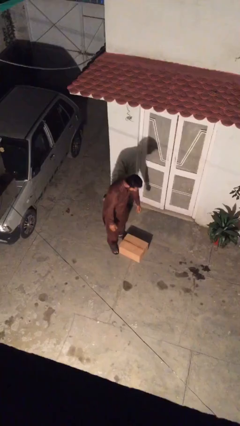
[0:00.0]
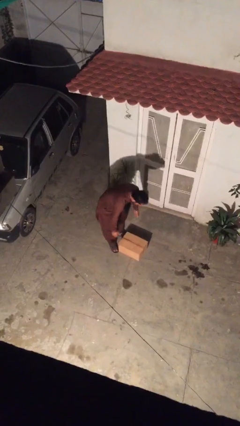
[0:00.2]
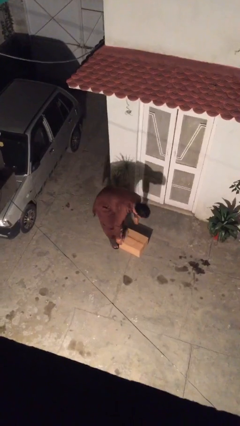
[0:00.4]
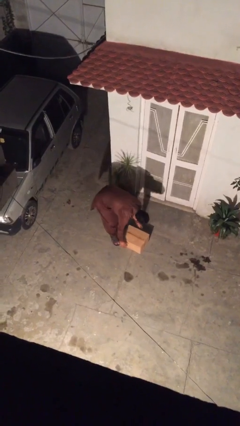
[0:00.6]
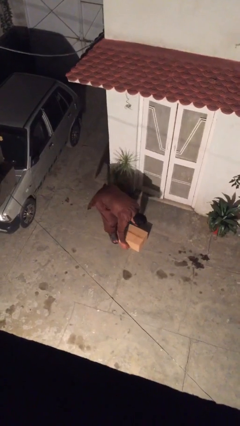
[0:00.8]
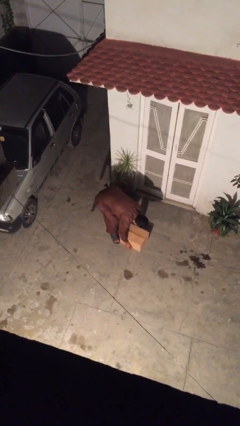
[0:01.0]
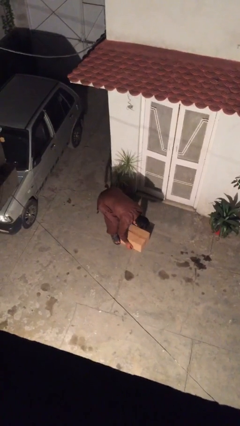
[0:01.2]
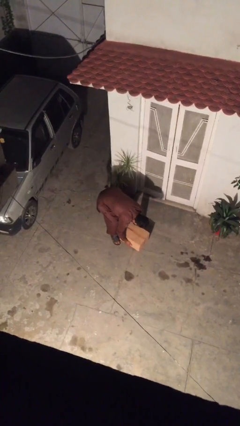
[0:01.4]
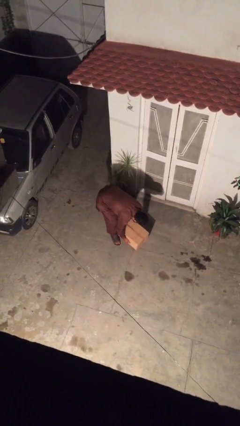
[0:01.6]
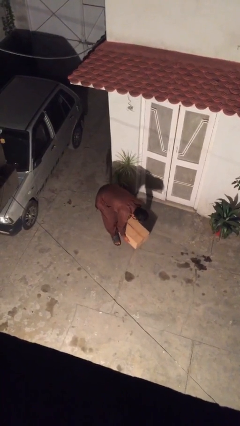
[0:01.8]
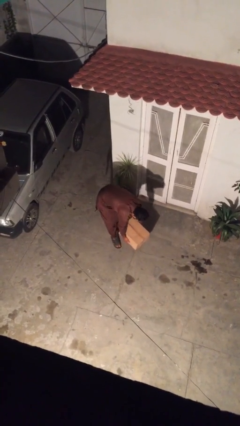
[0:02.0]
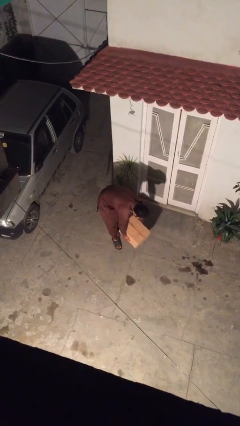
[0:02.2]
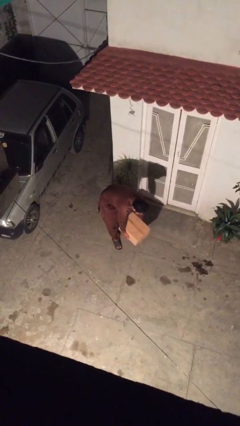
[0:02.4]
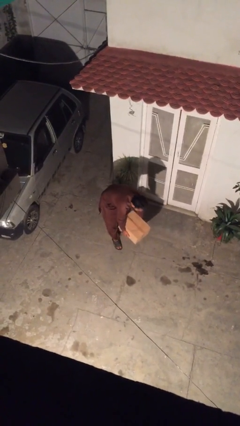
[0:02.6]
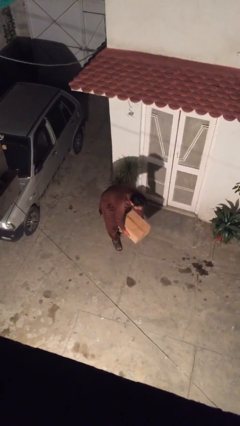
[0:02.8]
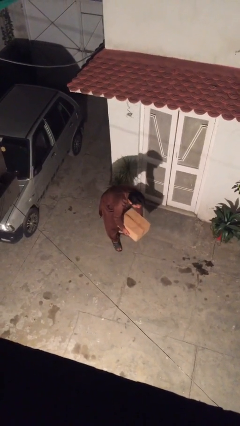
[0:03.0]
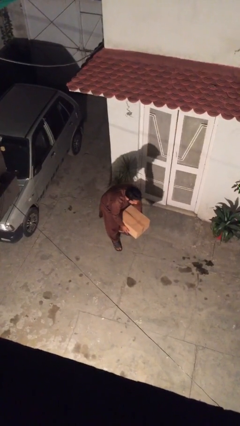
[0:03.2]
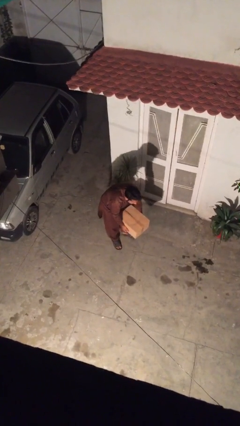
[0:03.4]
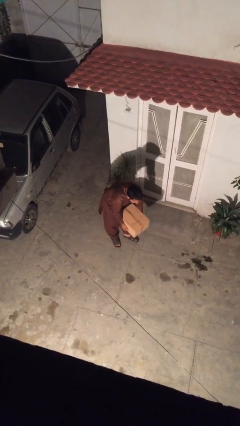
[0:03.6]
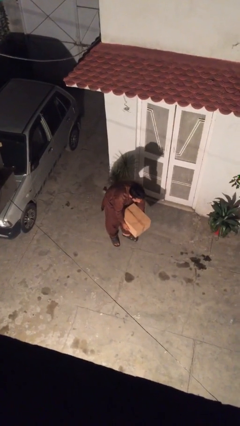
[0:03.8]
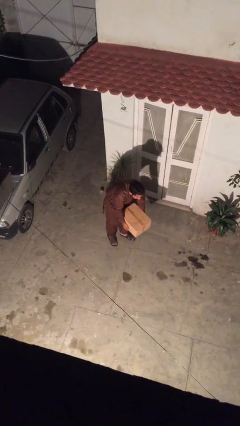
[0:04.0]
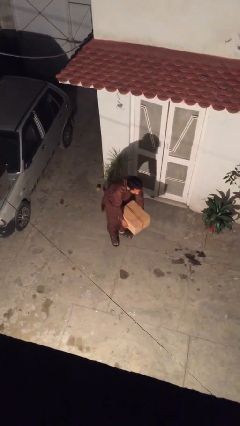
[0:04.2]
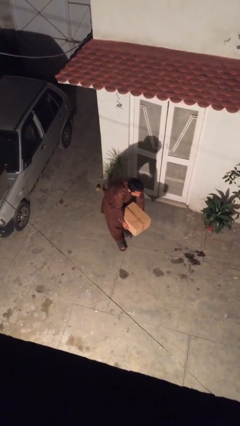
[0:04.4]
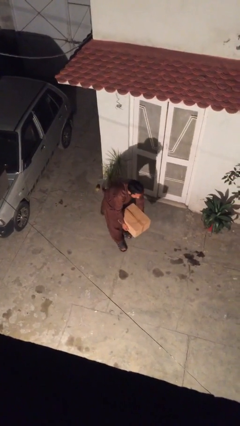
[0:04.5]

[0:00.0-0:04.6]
person picks up object from floor

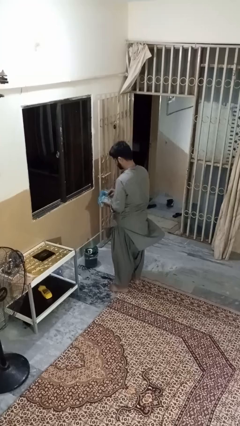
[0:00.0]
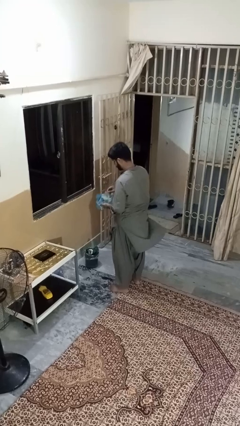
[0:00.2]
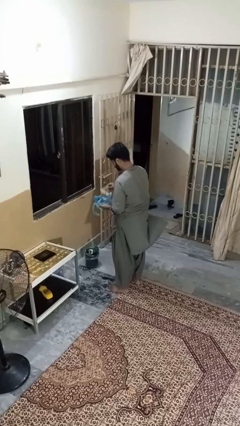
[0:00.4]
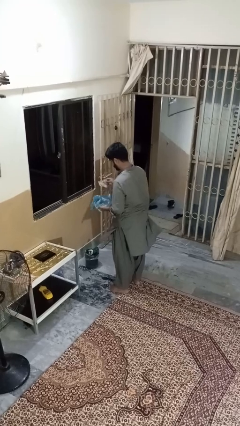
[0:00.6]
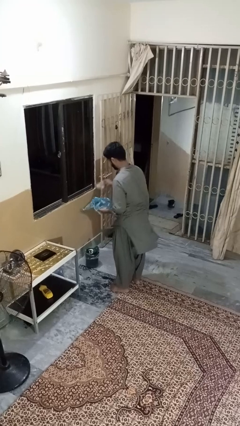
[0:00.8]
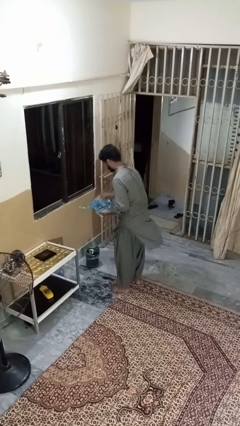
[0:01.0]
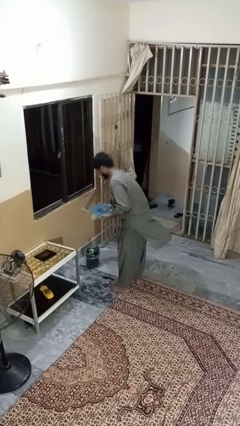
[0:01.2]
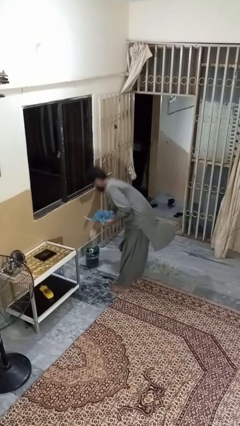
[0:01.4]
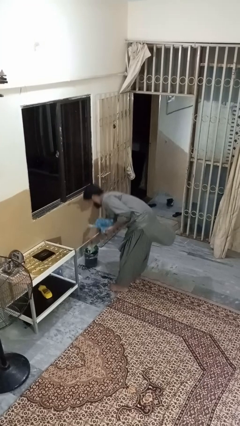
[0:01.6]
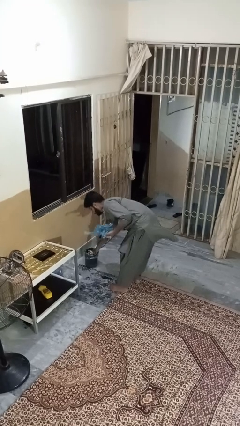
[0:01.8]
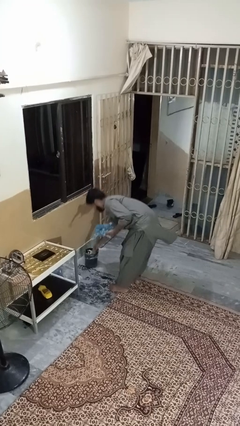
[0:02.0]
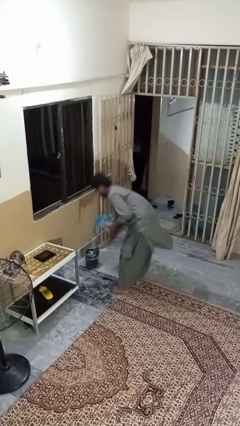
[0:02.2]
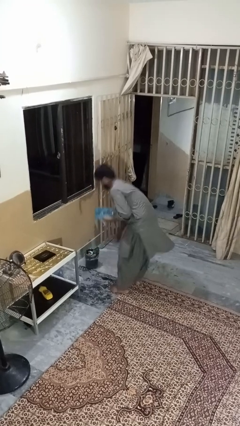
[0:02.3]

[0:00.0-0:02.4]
person discards trash

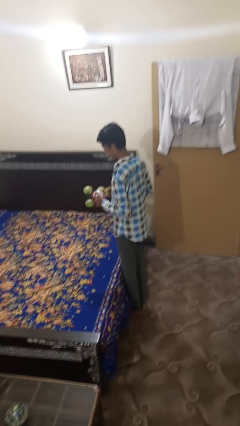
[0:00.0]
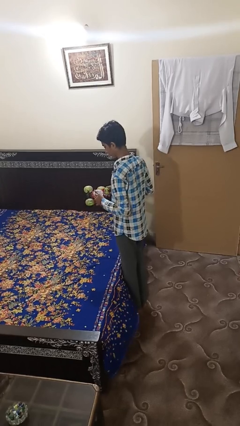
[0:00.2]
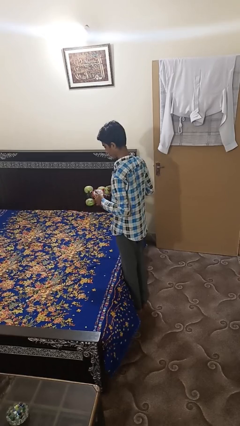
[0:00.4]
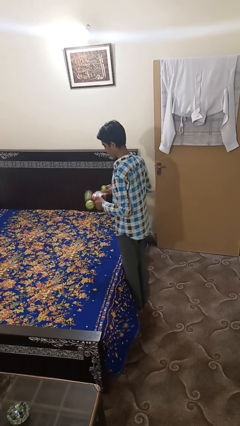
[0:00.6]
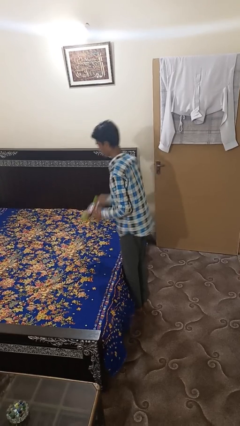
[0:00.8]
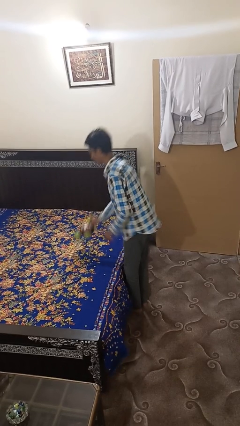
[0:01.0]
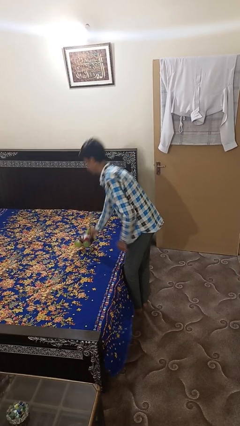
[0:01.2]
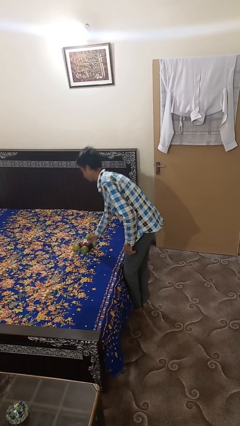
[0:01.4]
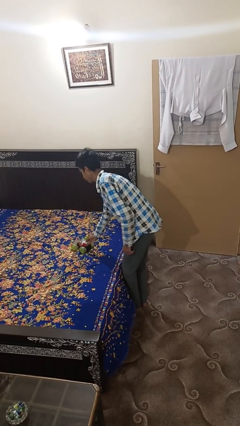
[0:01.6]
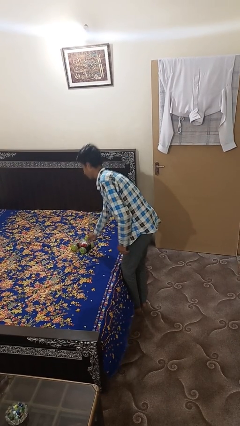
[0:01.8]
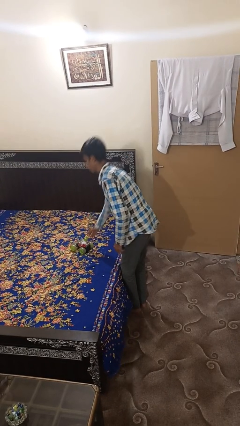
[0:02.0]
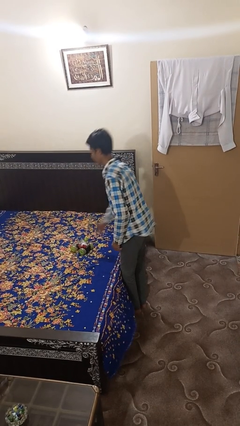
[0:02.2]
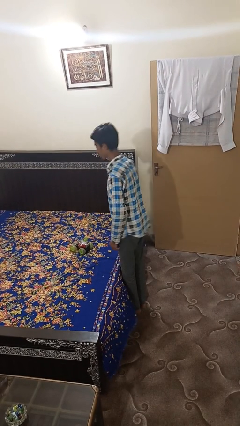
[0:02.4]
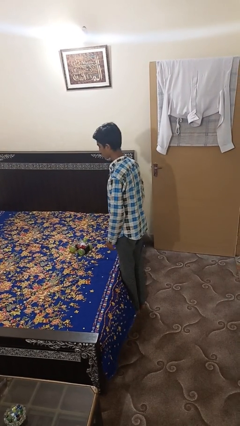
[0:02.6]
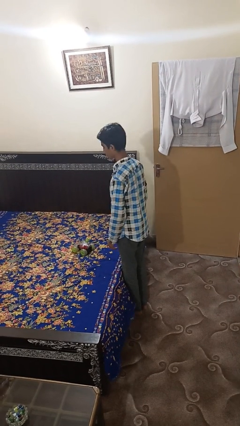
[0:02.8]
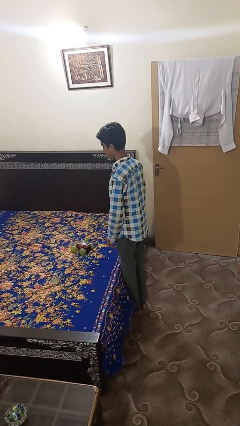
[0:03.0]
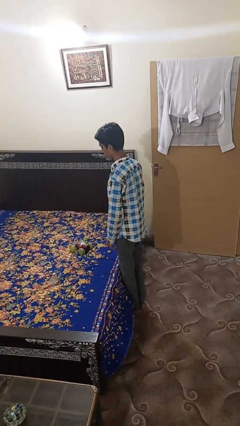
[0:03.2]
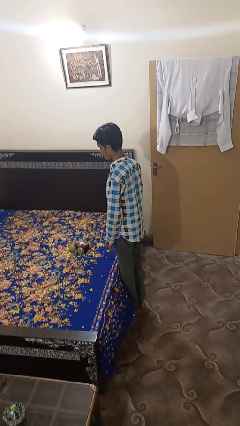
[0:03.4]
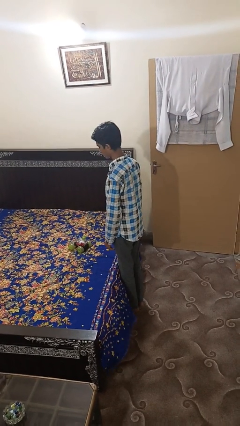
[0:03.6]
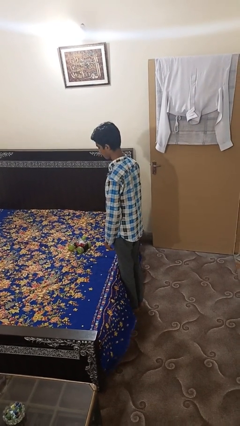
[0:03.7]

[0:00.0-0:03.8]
person puts down object on bed

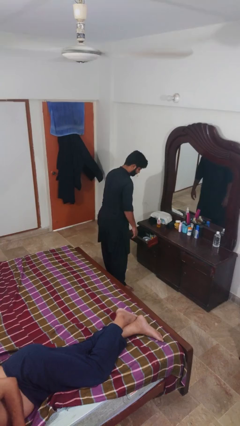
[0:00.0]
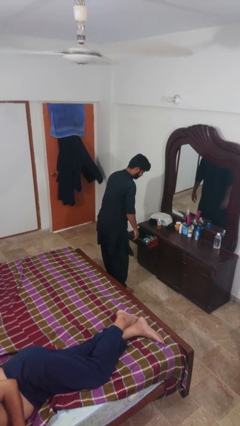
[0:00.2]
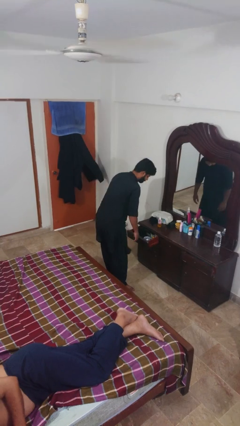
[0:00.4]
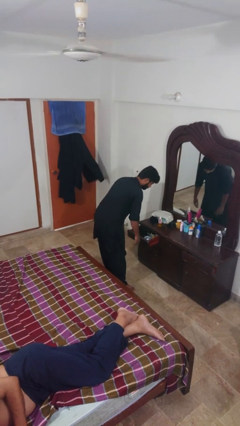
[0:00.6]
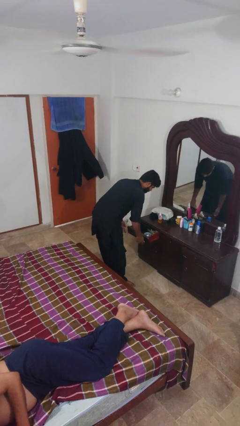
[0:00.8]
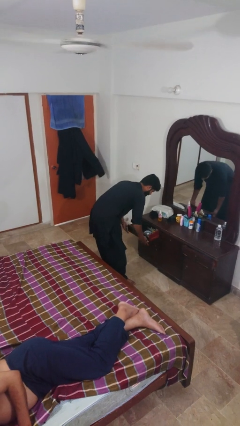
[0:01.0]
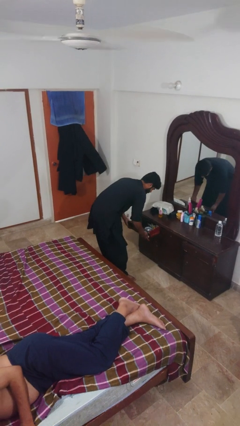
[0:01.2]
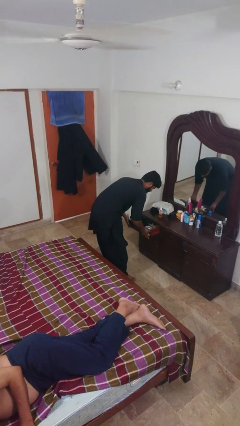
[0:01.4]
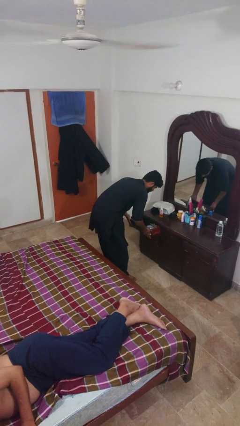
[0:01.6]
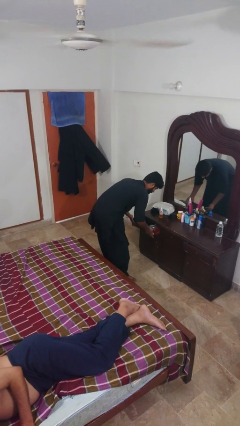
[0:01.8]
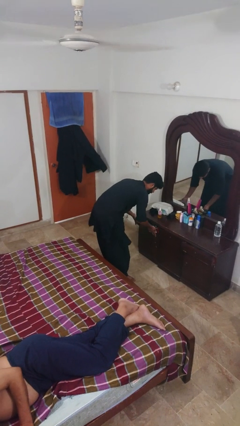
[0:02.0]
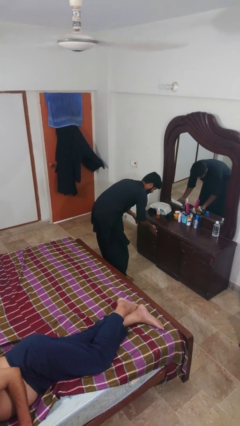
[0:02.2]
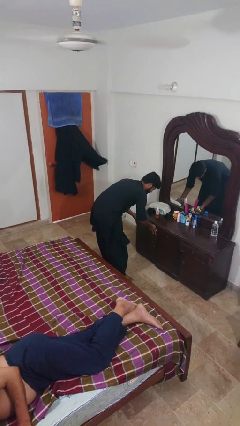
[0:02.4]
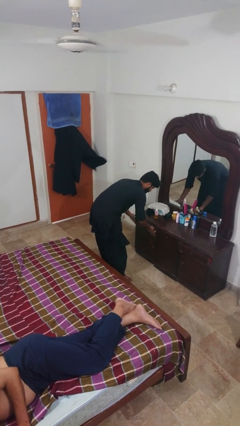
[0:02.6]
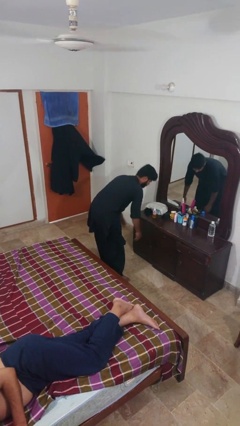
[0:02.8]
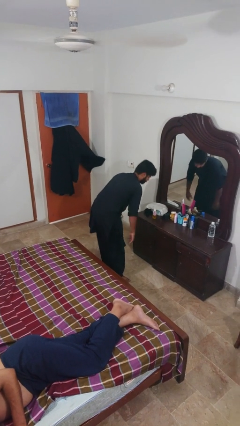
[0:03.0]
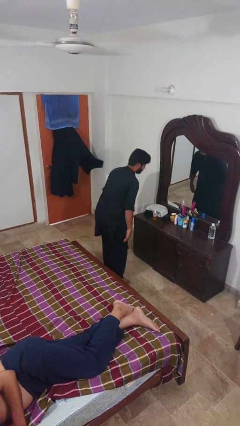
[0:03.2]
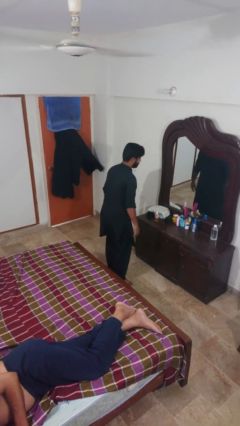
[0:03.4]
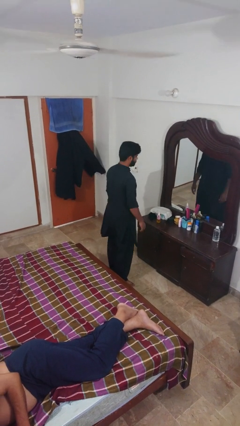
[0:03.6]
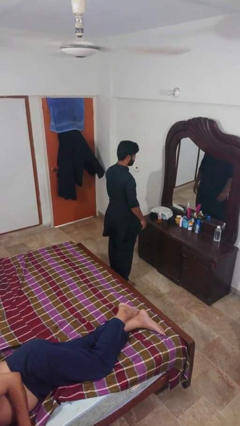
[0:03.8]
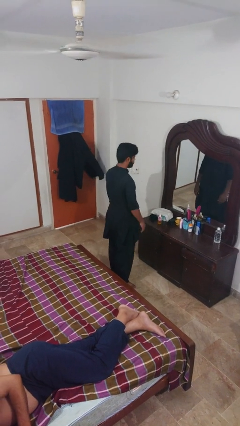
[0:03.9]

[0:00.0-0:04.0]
person closes dresser drawer

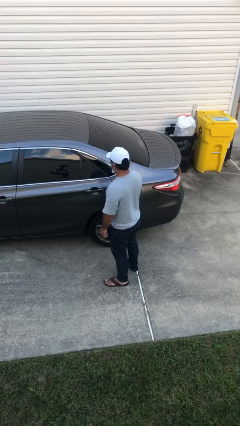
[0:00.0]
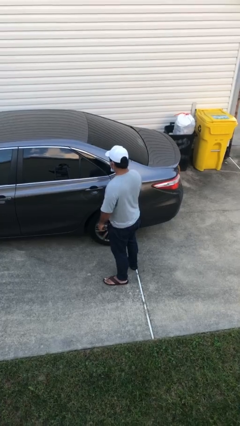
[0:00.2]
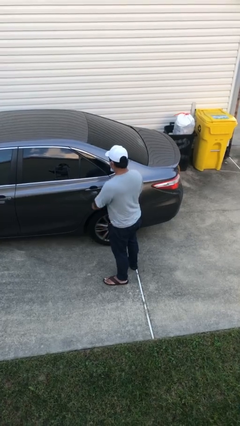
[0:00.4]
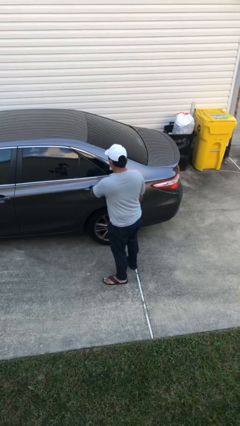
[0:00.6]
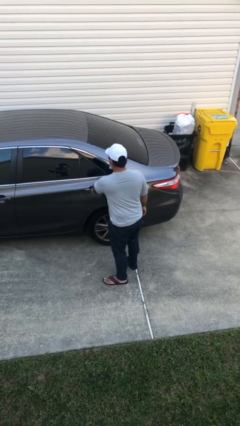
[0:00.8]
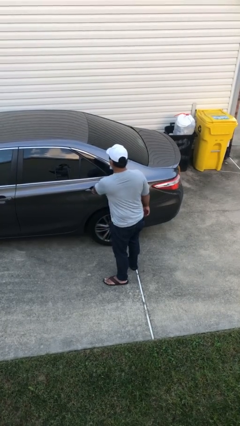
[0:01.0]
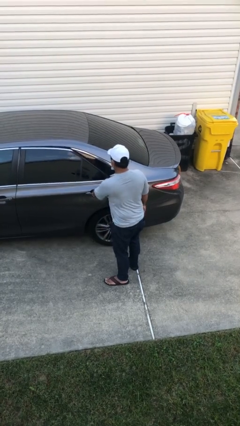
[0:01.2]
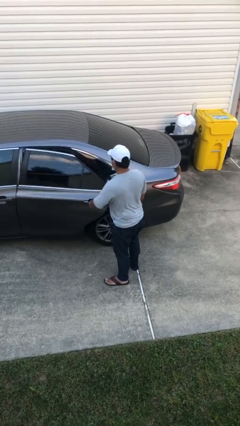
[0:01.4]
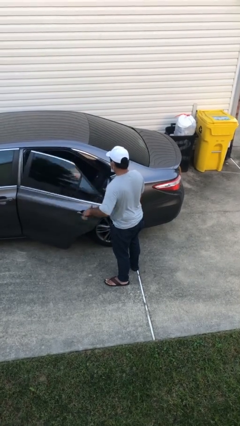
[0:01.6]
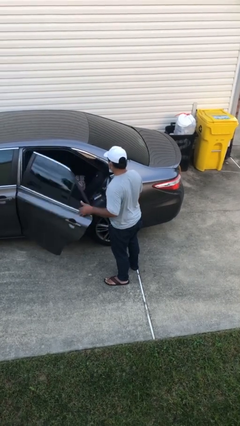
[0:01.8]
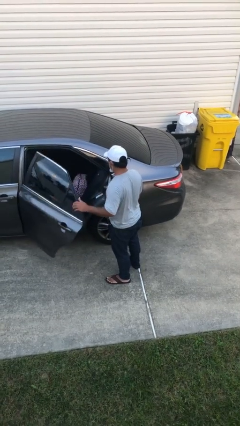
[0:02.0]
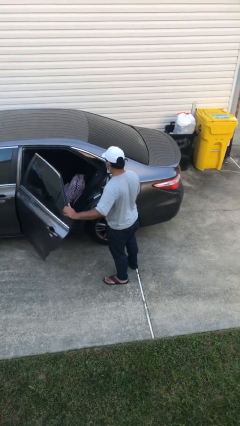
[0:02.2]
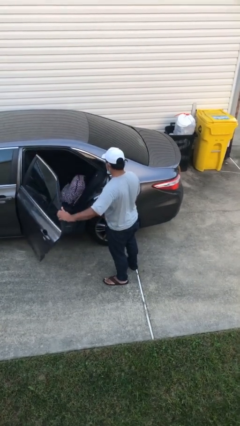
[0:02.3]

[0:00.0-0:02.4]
person opens car door

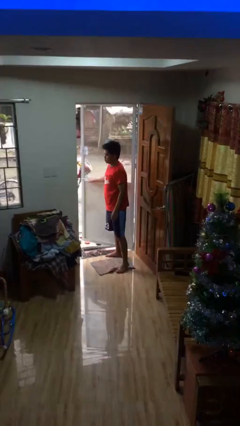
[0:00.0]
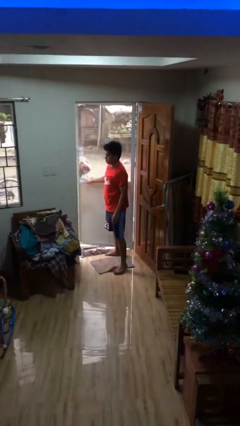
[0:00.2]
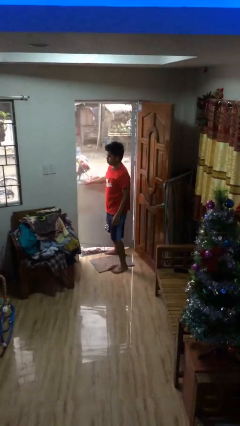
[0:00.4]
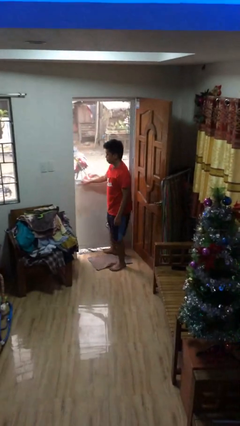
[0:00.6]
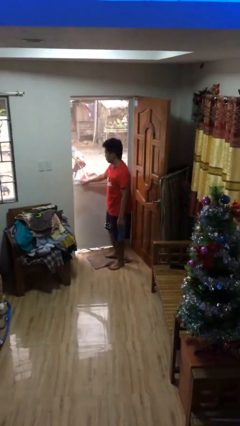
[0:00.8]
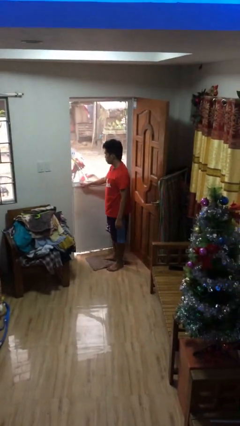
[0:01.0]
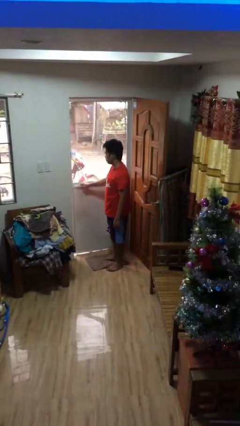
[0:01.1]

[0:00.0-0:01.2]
person closes facility door
